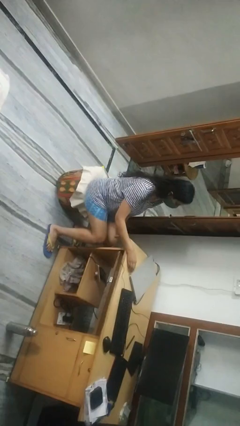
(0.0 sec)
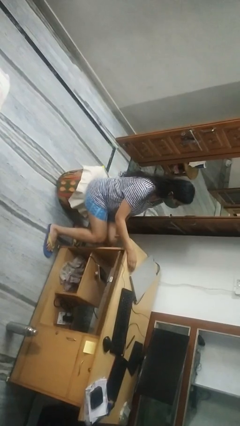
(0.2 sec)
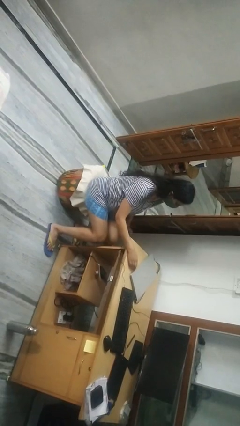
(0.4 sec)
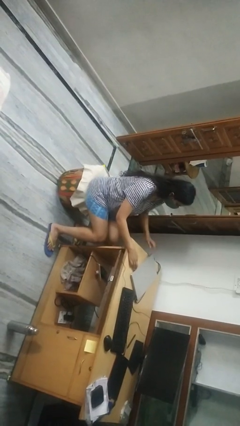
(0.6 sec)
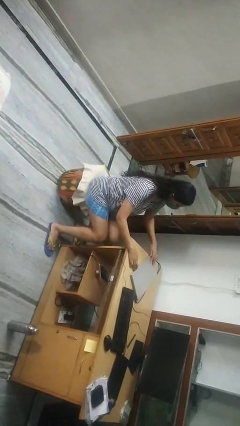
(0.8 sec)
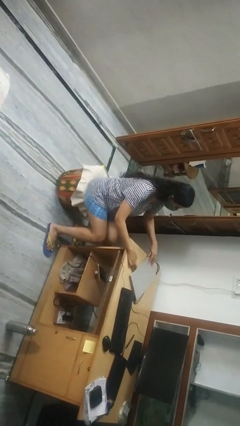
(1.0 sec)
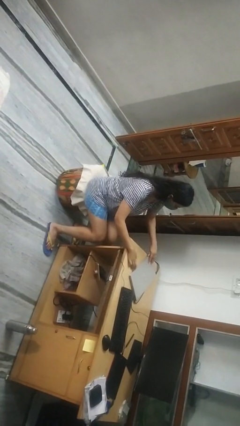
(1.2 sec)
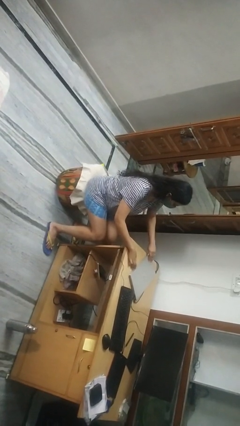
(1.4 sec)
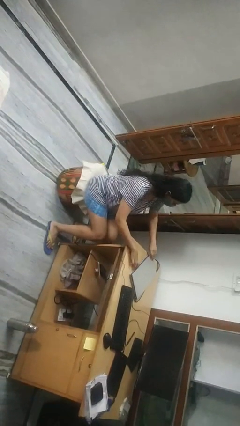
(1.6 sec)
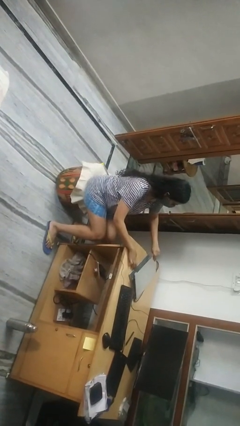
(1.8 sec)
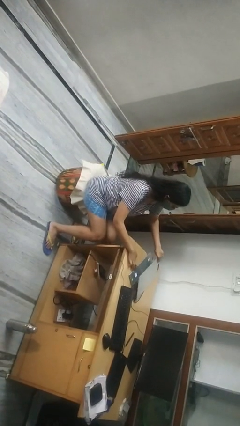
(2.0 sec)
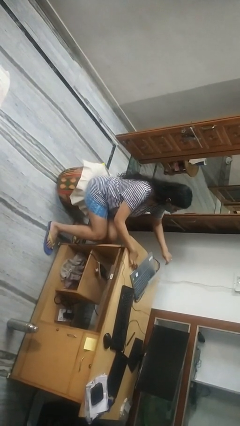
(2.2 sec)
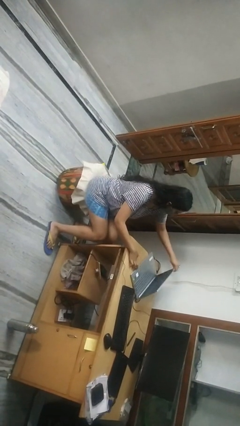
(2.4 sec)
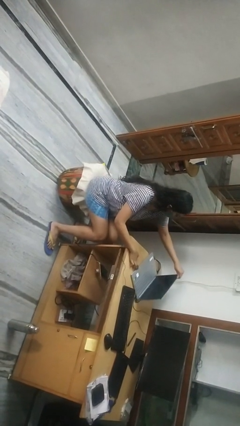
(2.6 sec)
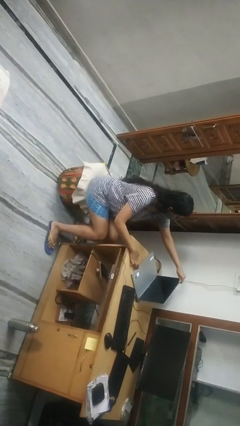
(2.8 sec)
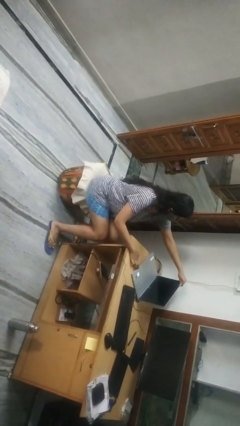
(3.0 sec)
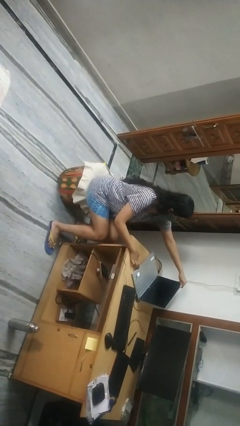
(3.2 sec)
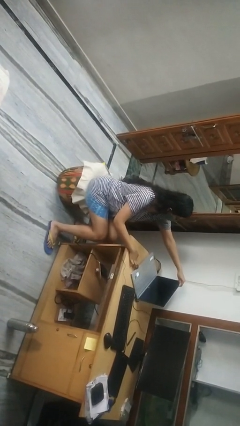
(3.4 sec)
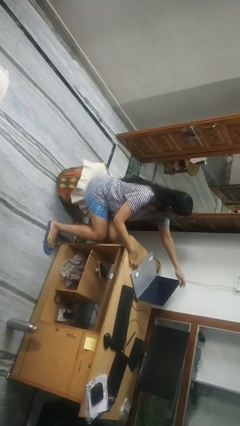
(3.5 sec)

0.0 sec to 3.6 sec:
person opens laptop

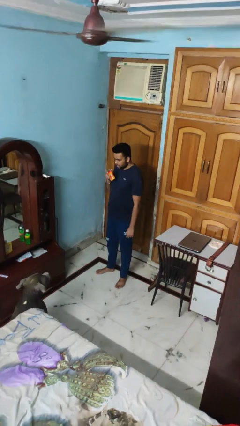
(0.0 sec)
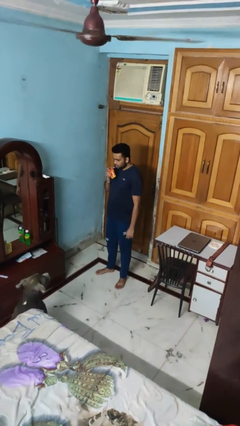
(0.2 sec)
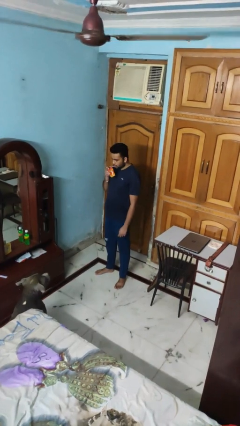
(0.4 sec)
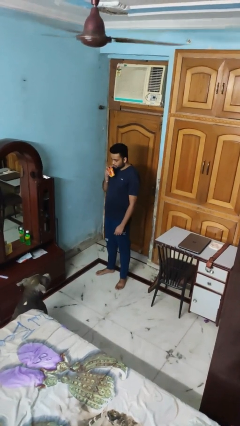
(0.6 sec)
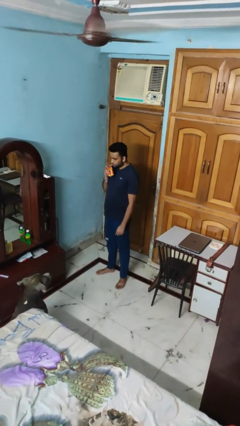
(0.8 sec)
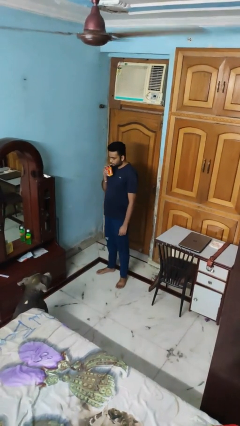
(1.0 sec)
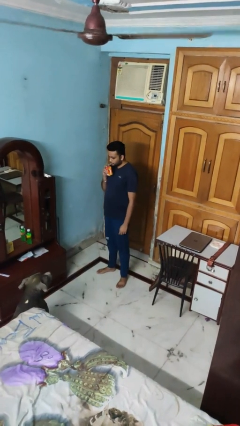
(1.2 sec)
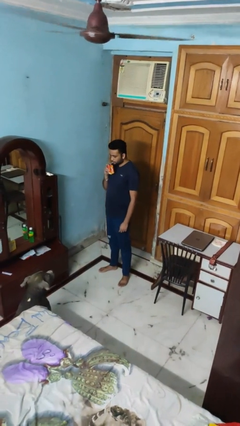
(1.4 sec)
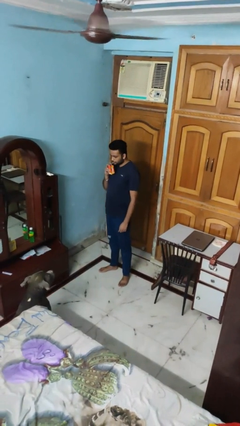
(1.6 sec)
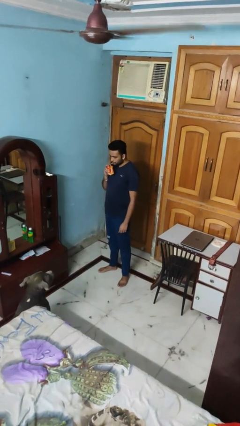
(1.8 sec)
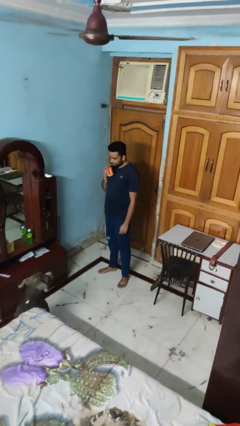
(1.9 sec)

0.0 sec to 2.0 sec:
person drinks from straw

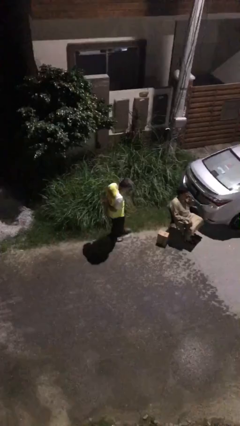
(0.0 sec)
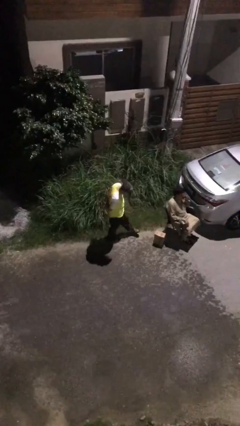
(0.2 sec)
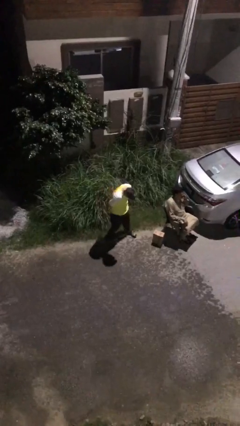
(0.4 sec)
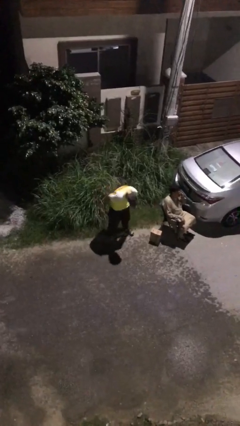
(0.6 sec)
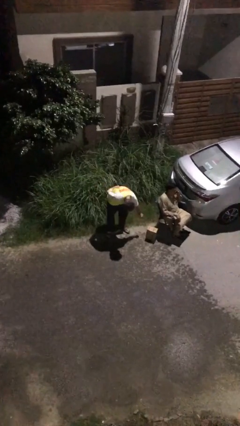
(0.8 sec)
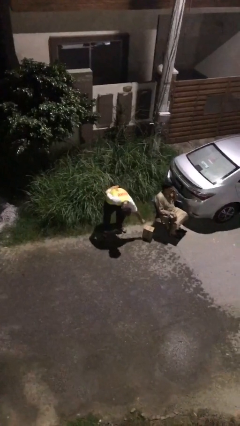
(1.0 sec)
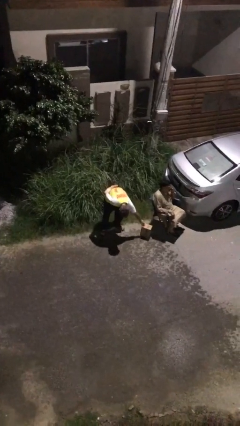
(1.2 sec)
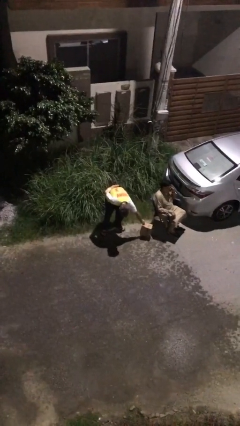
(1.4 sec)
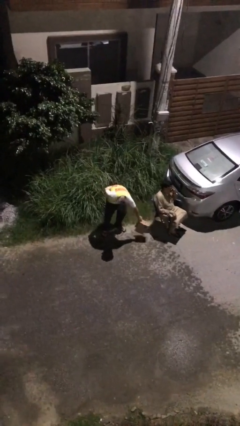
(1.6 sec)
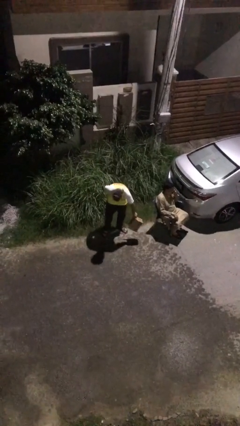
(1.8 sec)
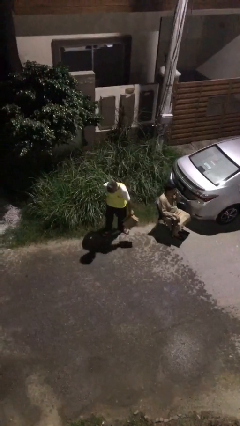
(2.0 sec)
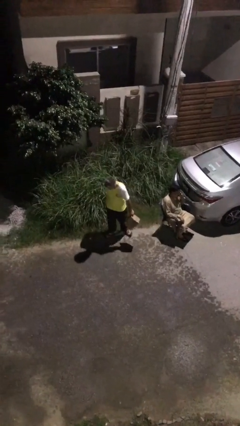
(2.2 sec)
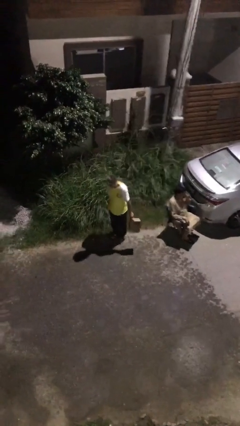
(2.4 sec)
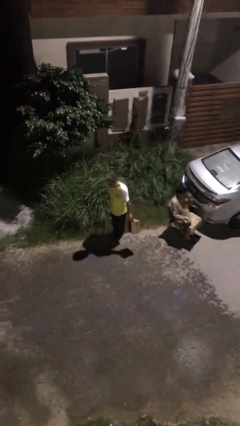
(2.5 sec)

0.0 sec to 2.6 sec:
person steals object from person

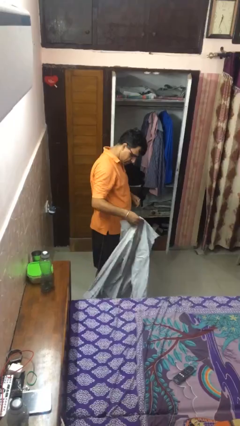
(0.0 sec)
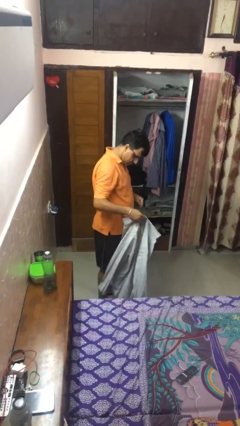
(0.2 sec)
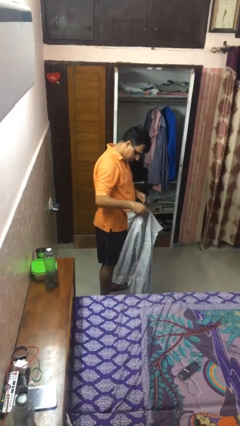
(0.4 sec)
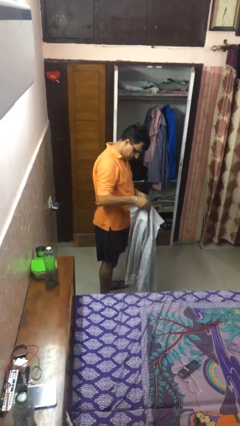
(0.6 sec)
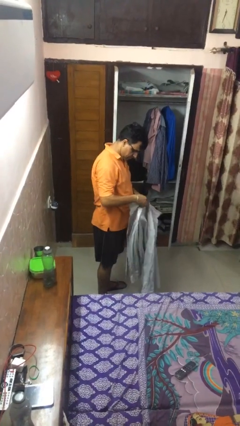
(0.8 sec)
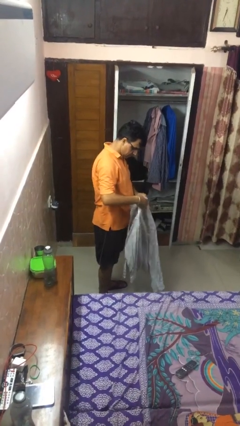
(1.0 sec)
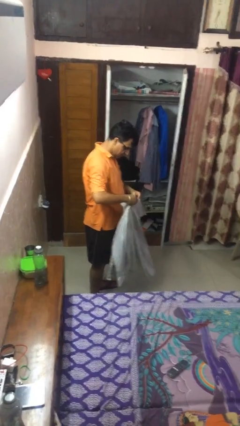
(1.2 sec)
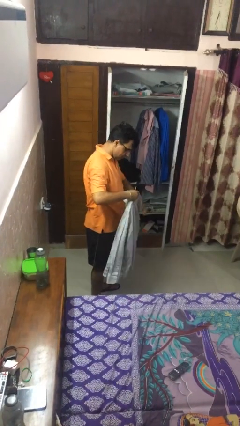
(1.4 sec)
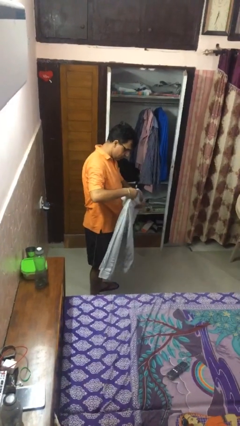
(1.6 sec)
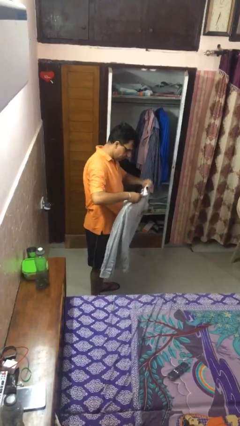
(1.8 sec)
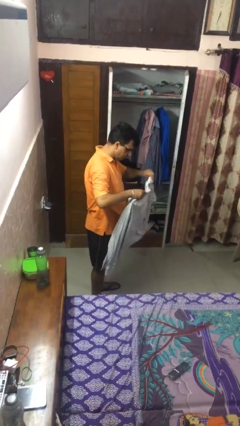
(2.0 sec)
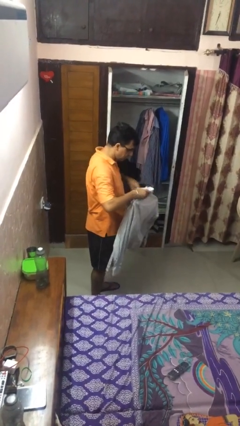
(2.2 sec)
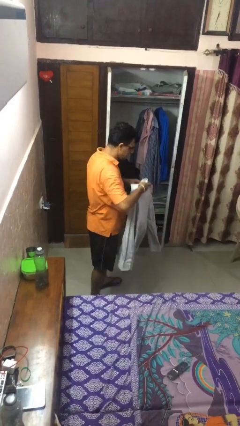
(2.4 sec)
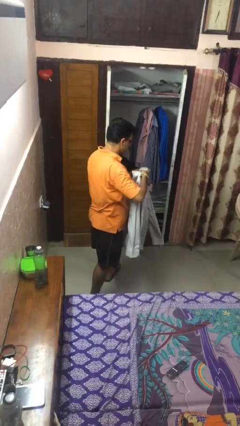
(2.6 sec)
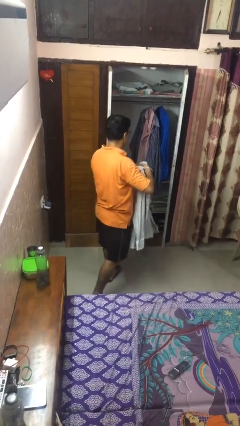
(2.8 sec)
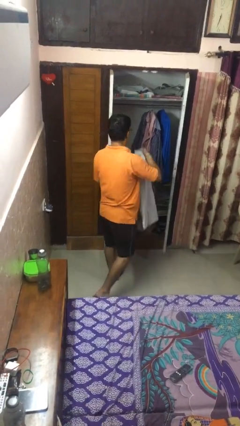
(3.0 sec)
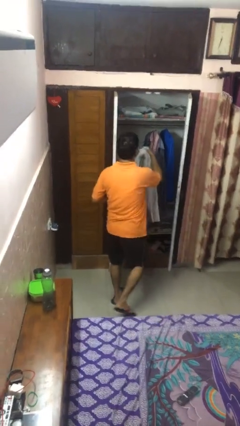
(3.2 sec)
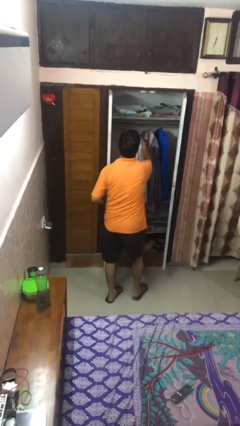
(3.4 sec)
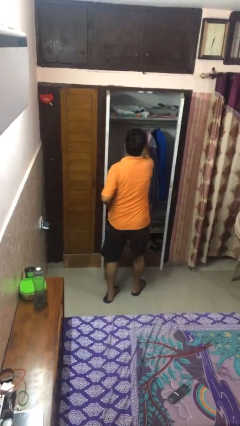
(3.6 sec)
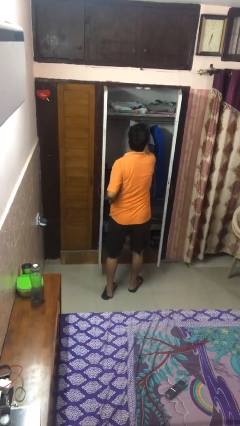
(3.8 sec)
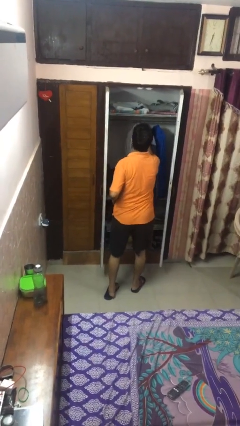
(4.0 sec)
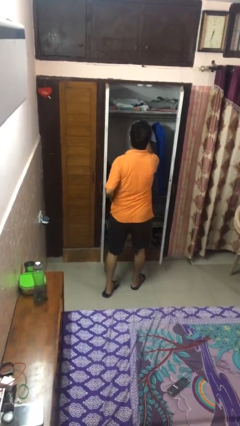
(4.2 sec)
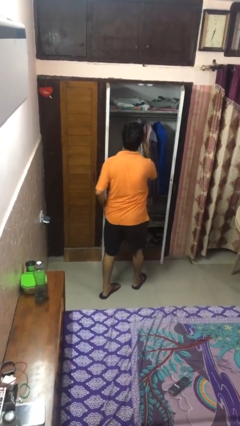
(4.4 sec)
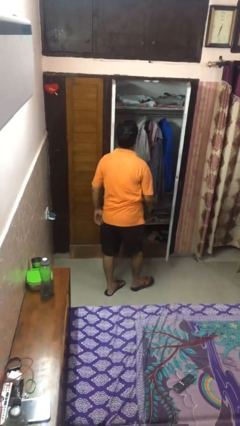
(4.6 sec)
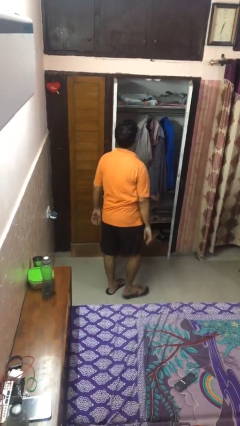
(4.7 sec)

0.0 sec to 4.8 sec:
person puts clothes into closet

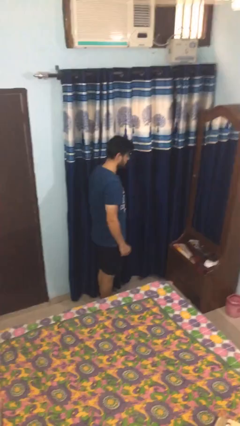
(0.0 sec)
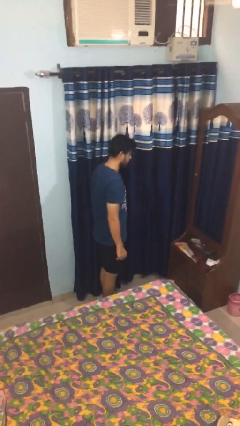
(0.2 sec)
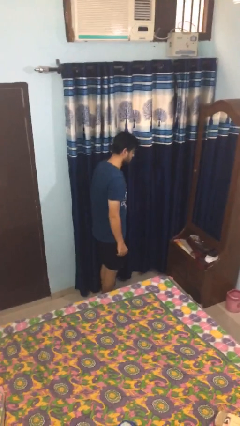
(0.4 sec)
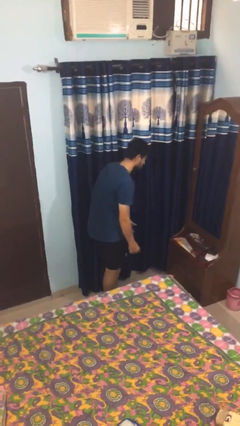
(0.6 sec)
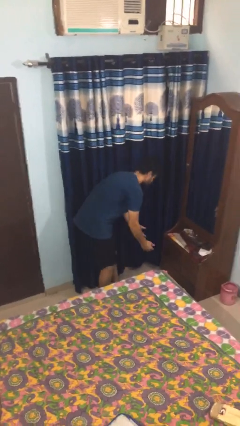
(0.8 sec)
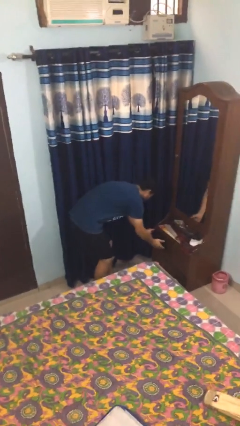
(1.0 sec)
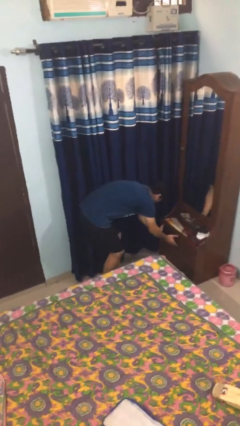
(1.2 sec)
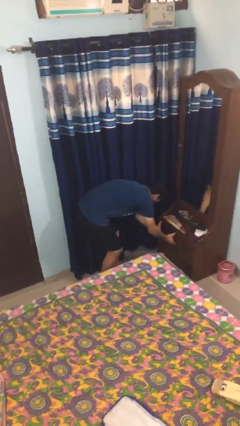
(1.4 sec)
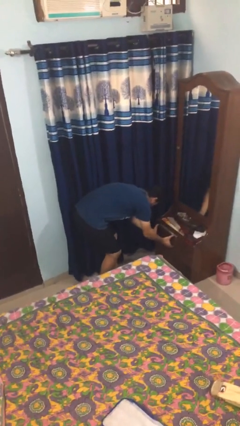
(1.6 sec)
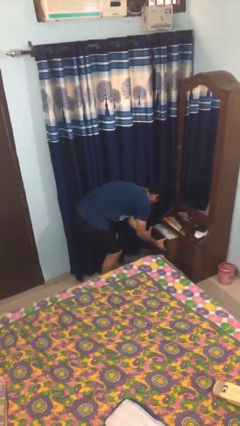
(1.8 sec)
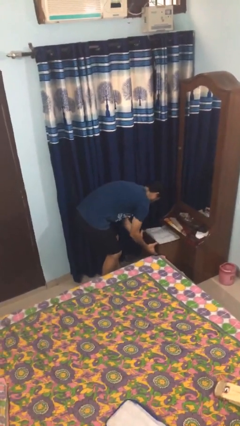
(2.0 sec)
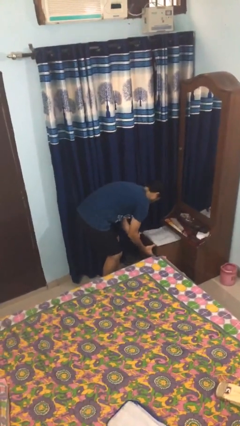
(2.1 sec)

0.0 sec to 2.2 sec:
person opens dresser drawer

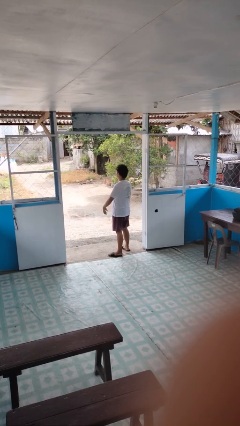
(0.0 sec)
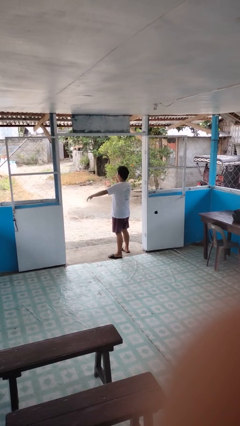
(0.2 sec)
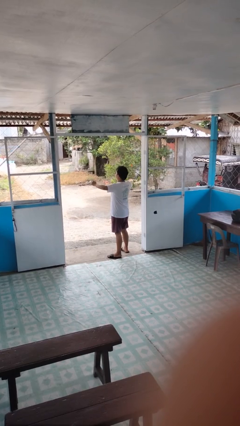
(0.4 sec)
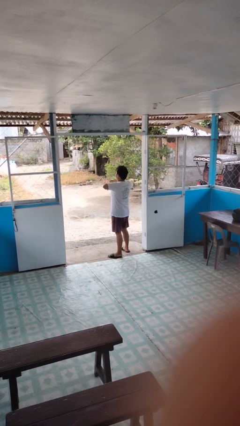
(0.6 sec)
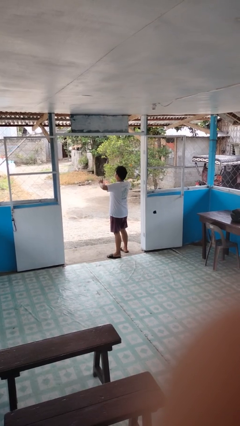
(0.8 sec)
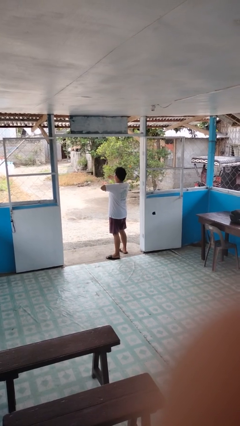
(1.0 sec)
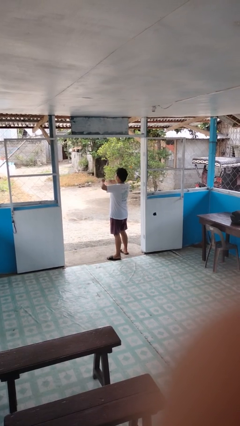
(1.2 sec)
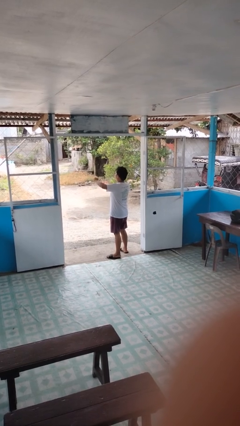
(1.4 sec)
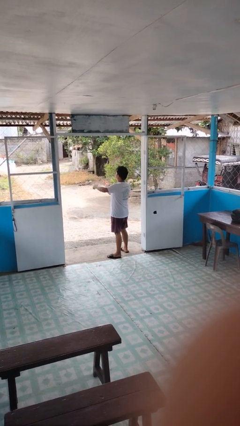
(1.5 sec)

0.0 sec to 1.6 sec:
person drums on chest

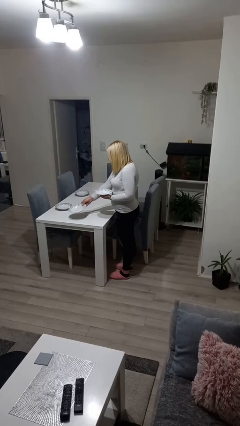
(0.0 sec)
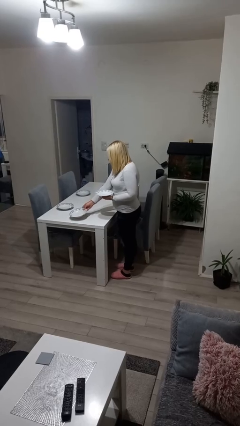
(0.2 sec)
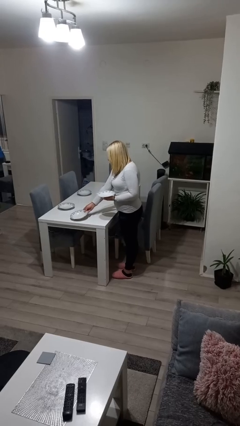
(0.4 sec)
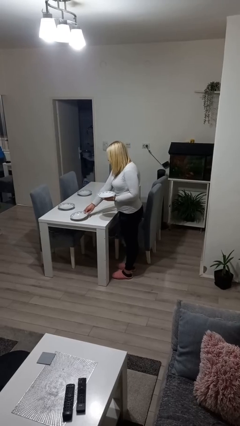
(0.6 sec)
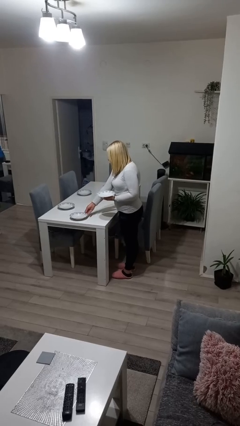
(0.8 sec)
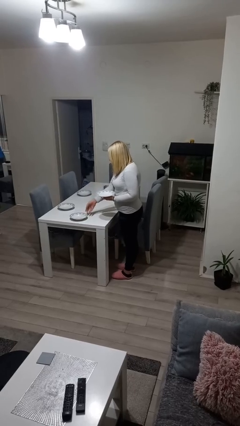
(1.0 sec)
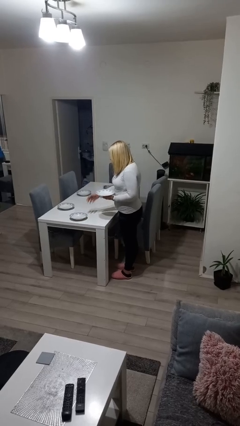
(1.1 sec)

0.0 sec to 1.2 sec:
person sets table
